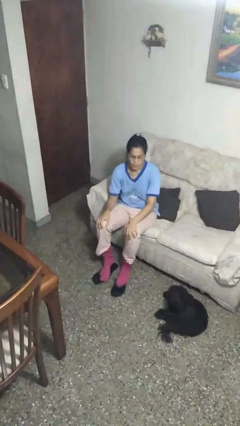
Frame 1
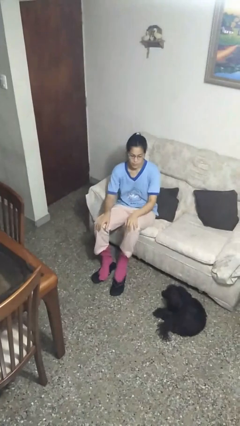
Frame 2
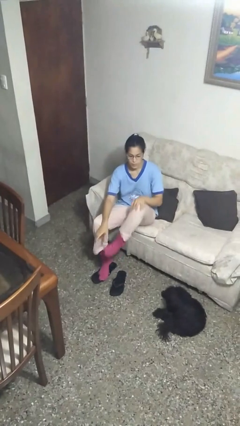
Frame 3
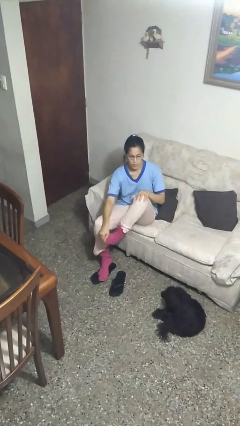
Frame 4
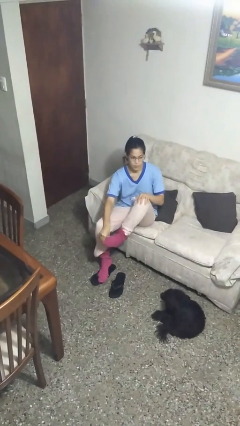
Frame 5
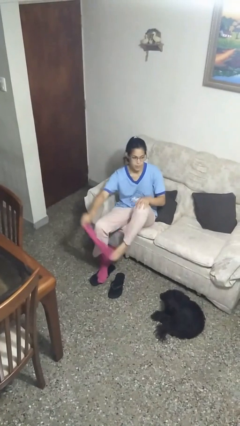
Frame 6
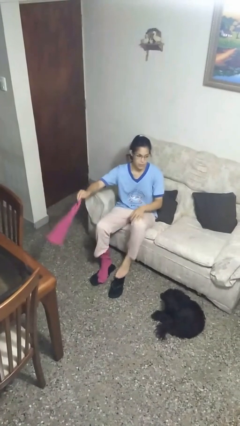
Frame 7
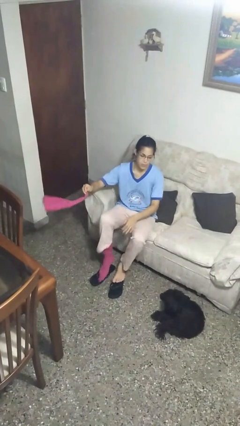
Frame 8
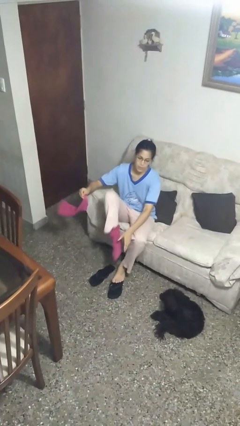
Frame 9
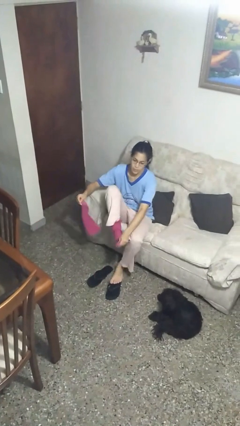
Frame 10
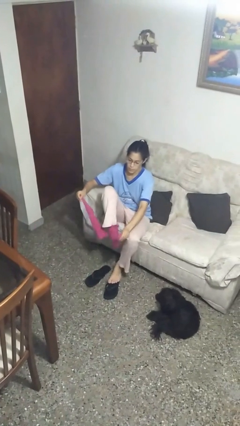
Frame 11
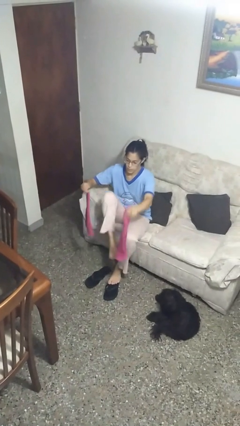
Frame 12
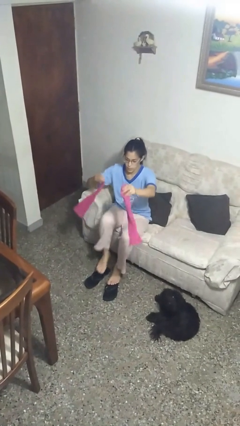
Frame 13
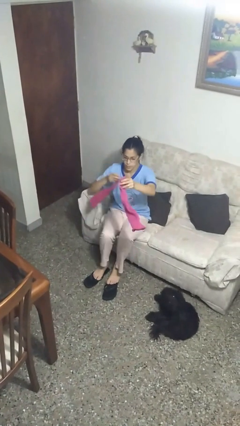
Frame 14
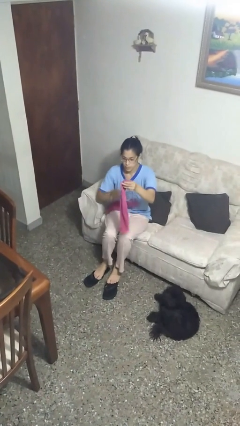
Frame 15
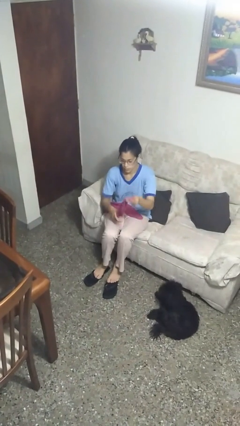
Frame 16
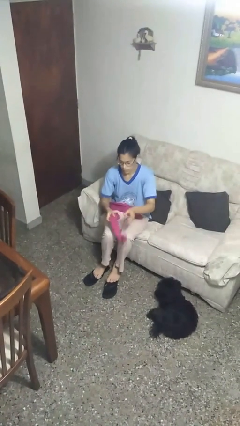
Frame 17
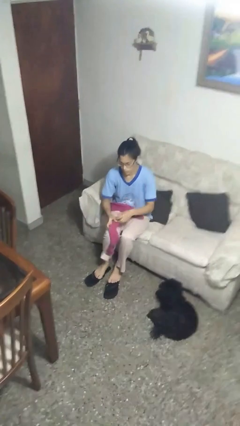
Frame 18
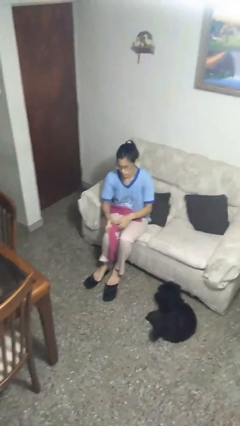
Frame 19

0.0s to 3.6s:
person takes off socks

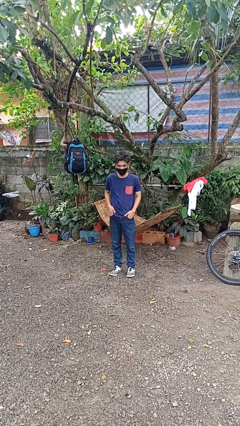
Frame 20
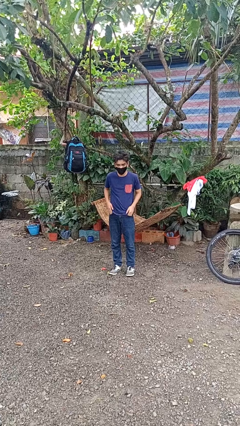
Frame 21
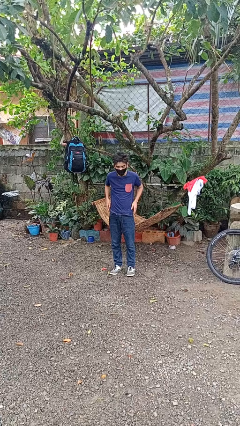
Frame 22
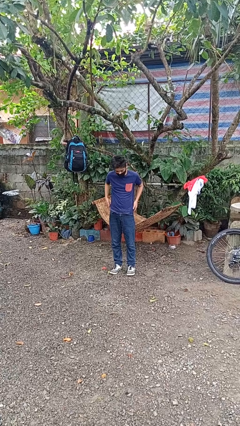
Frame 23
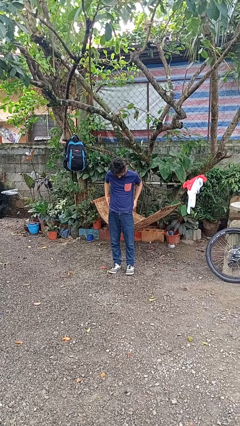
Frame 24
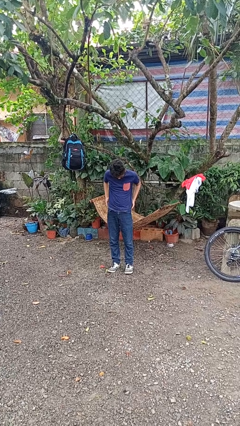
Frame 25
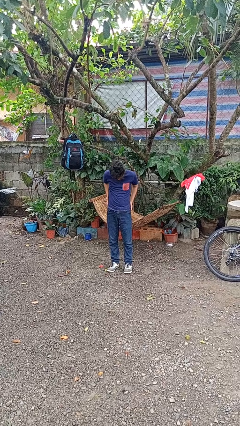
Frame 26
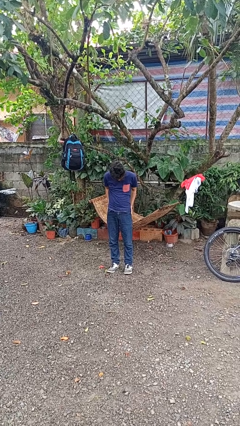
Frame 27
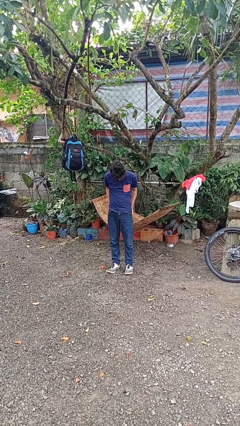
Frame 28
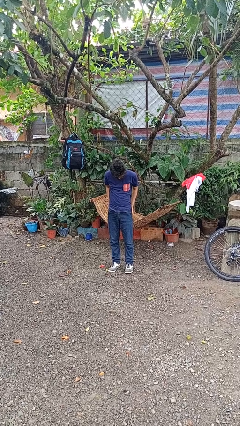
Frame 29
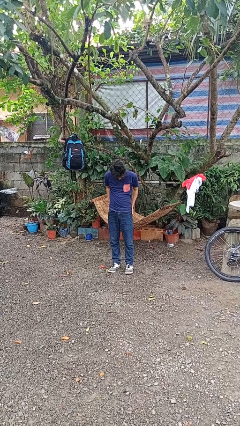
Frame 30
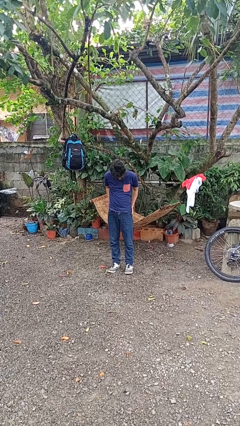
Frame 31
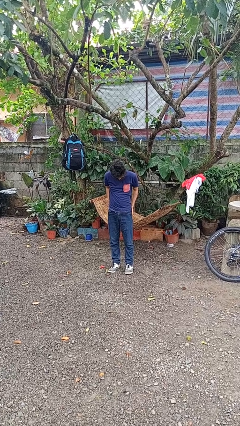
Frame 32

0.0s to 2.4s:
person puts hands in back pockets

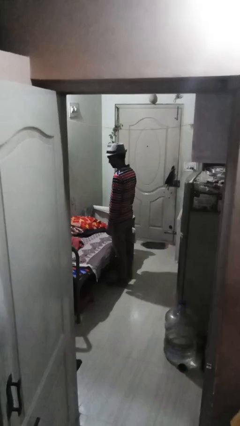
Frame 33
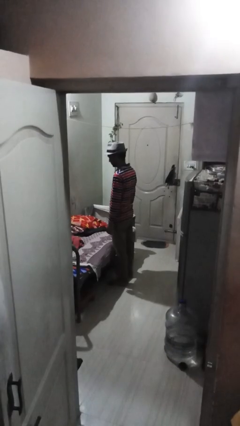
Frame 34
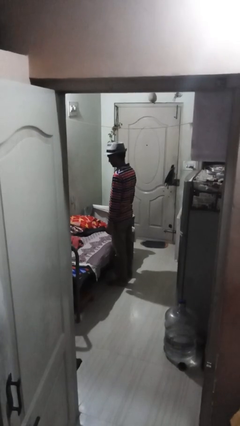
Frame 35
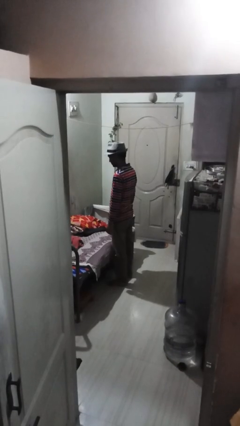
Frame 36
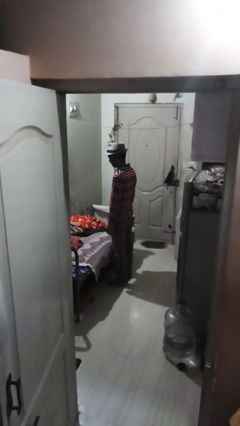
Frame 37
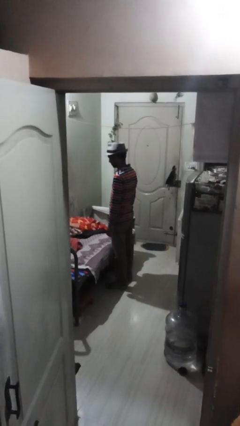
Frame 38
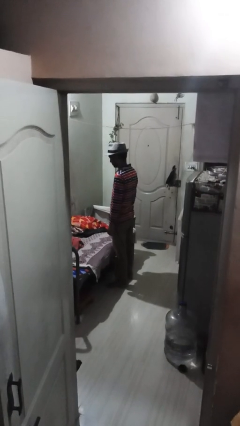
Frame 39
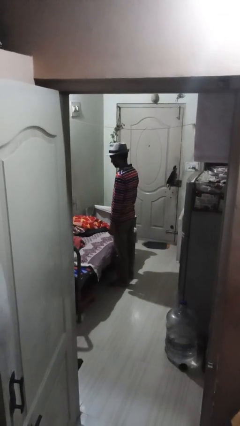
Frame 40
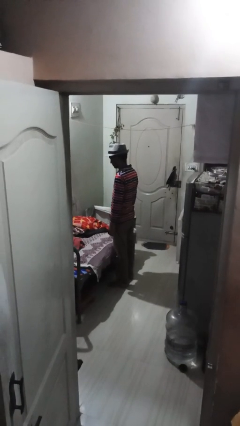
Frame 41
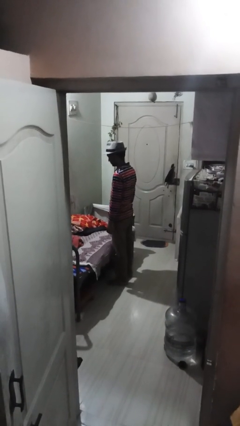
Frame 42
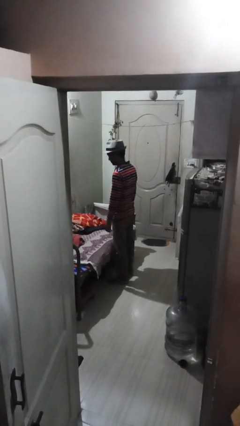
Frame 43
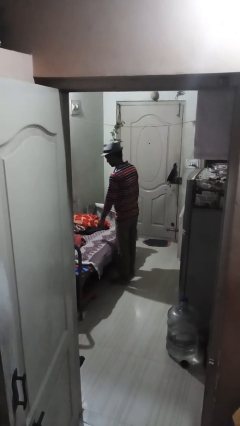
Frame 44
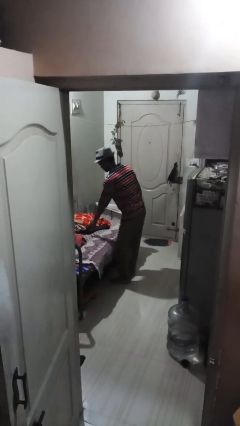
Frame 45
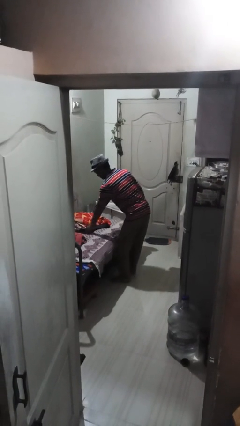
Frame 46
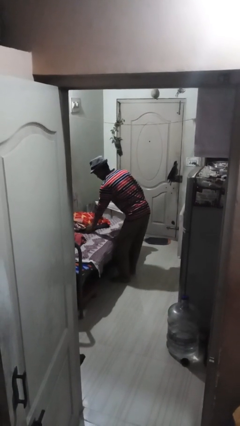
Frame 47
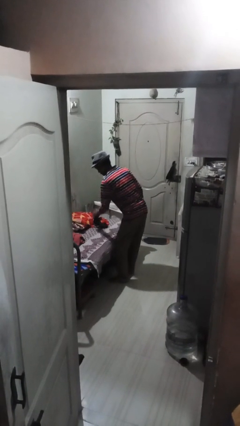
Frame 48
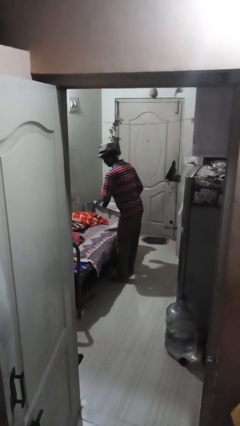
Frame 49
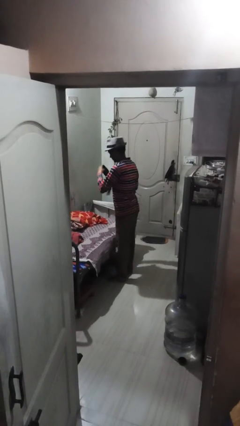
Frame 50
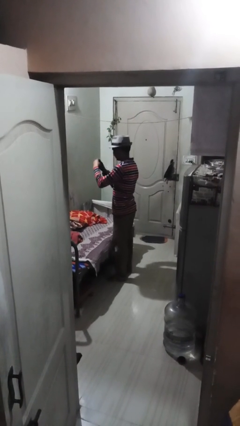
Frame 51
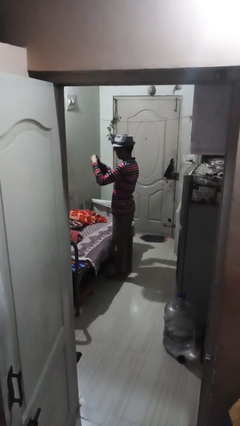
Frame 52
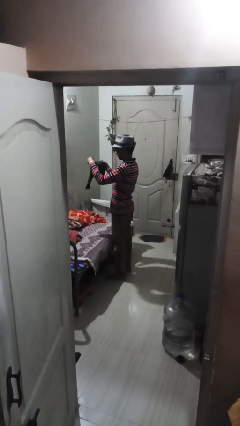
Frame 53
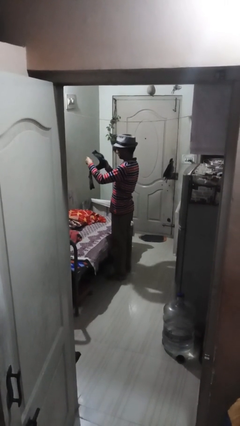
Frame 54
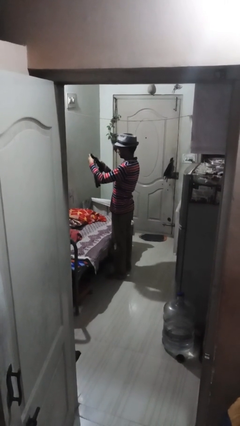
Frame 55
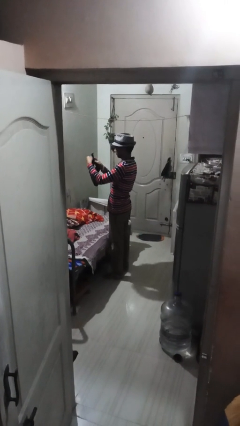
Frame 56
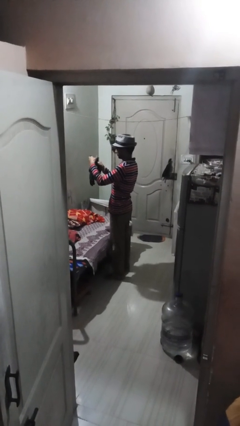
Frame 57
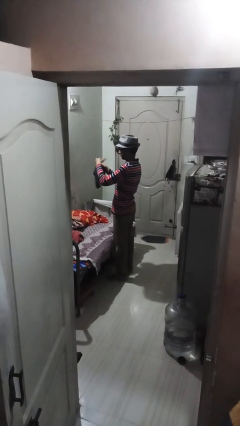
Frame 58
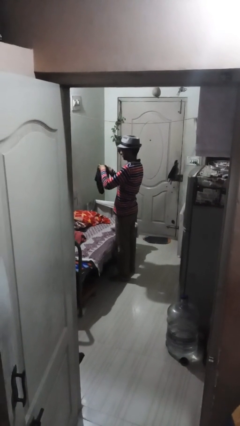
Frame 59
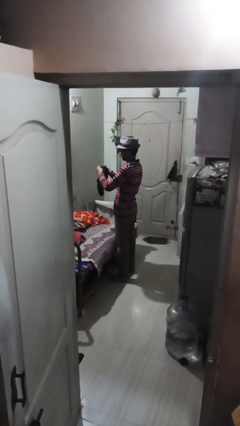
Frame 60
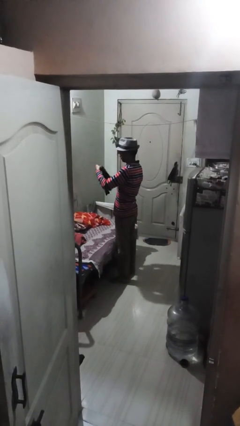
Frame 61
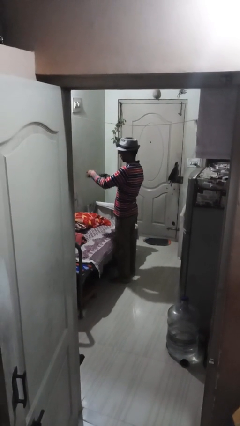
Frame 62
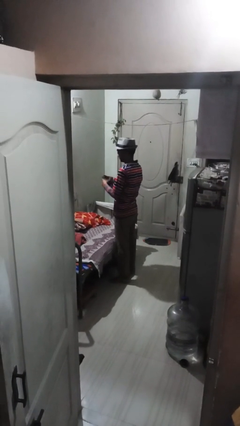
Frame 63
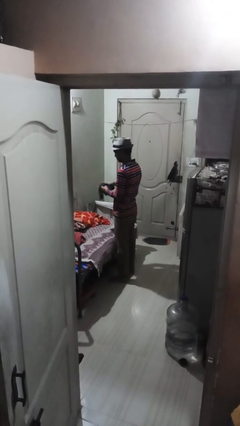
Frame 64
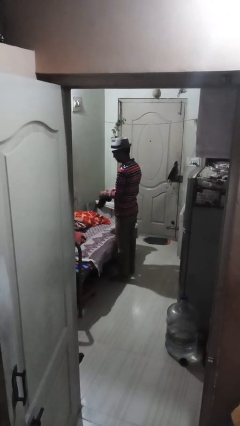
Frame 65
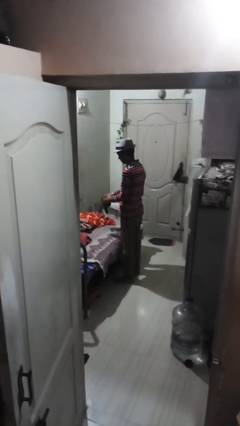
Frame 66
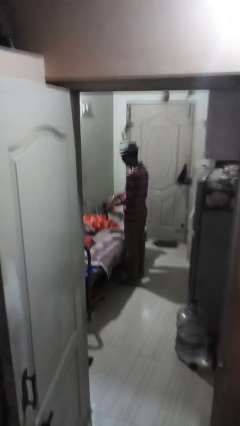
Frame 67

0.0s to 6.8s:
person folds socks

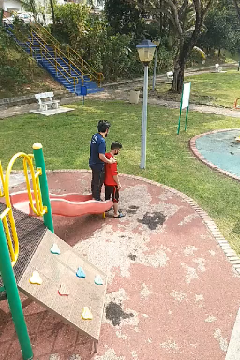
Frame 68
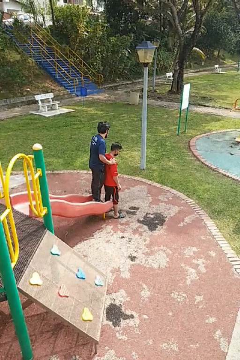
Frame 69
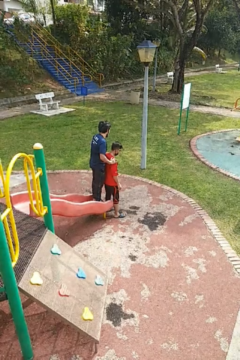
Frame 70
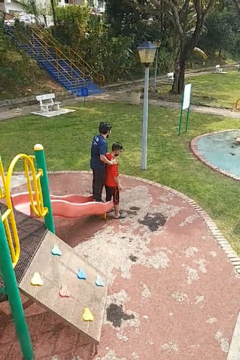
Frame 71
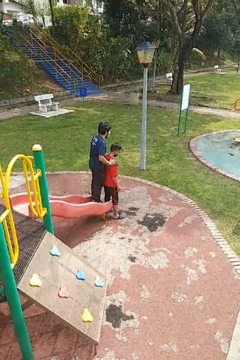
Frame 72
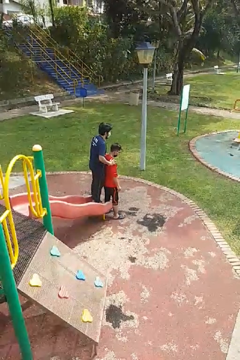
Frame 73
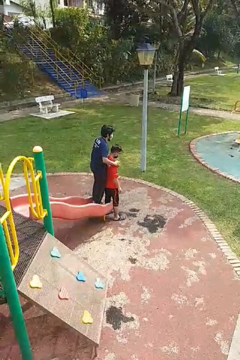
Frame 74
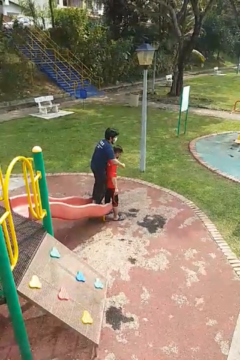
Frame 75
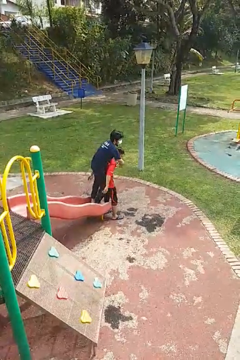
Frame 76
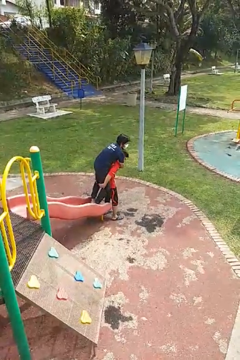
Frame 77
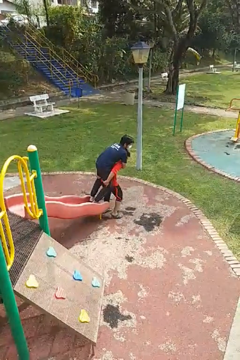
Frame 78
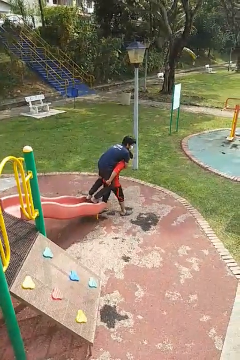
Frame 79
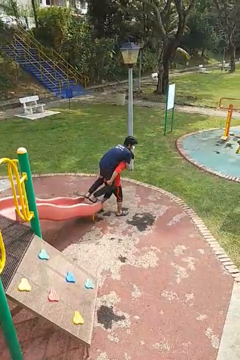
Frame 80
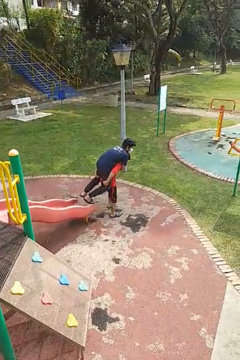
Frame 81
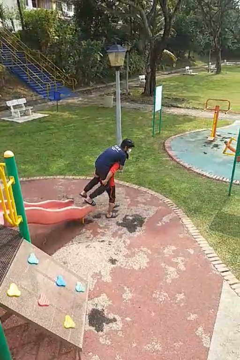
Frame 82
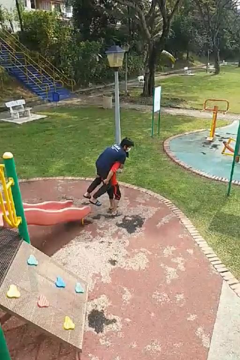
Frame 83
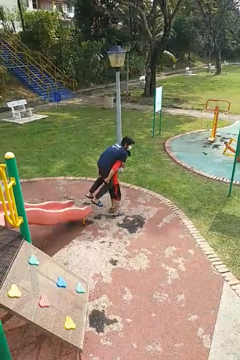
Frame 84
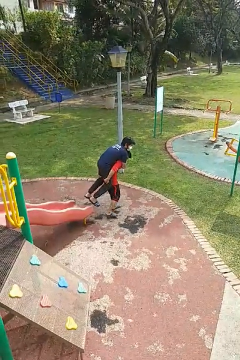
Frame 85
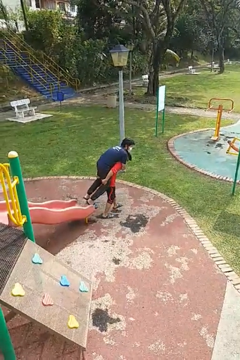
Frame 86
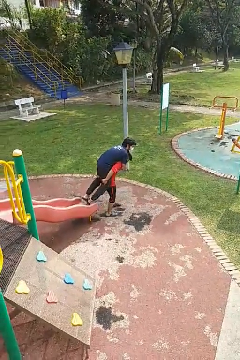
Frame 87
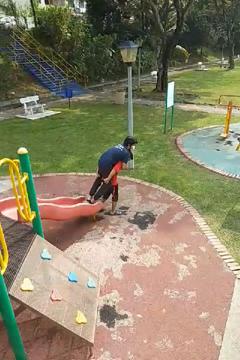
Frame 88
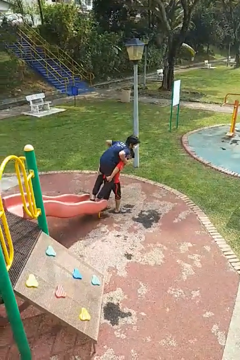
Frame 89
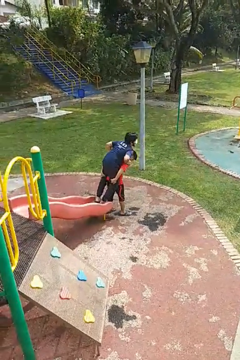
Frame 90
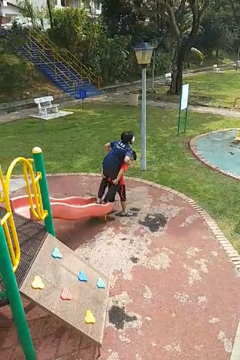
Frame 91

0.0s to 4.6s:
person carries person on back

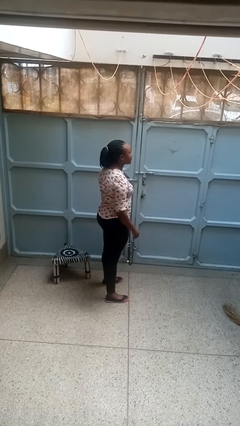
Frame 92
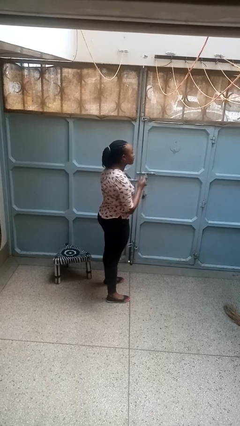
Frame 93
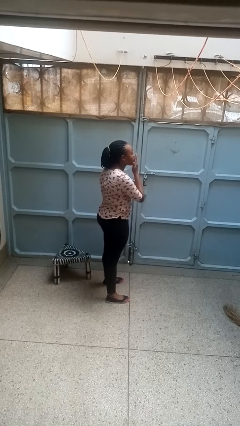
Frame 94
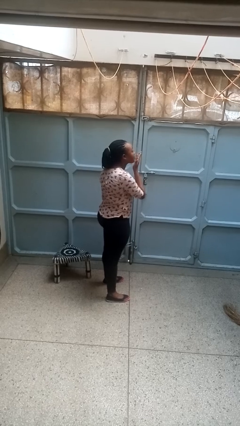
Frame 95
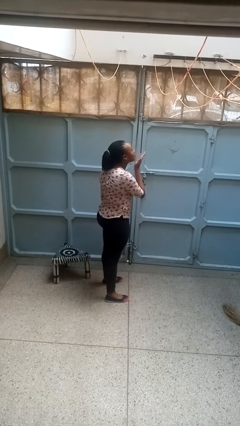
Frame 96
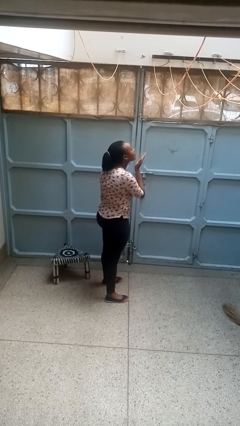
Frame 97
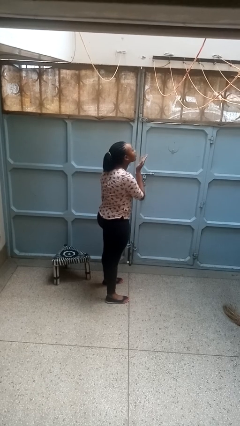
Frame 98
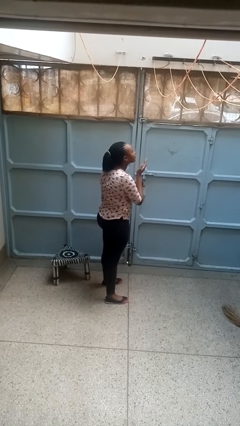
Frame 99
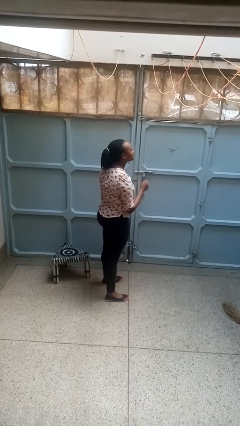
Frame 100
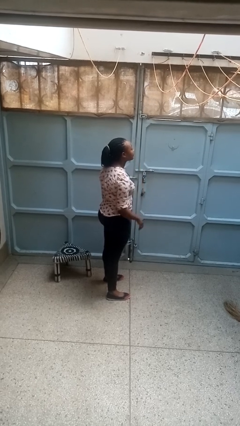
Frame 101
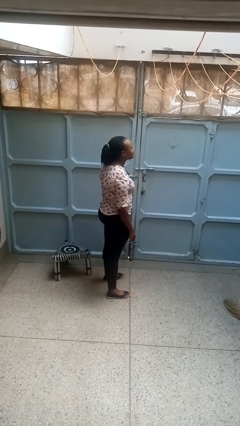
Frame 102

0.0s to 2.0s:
person gestures blow kiss
